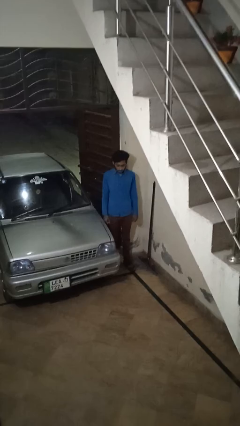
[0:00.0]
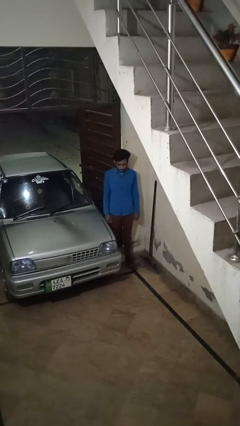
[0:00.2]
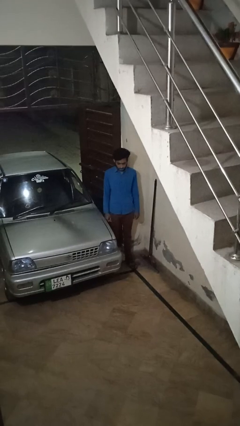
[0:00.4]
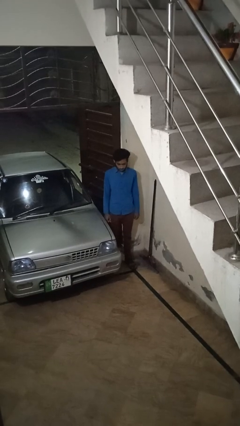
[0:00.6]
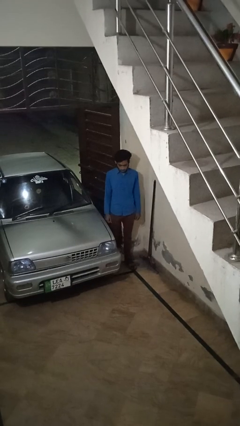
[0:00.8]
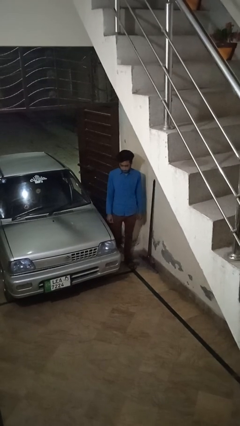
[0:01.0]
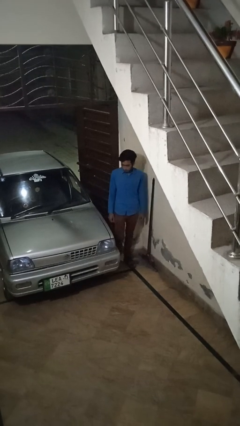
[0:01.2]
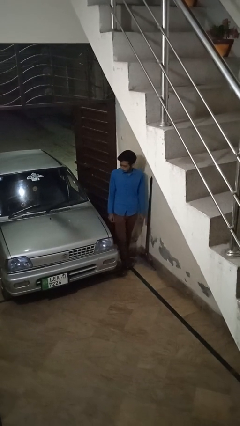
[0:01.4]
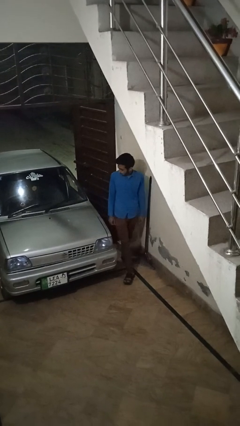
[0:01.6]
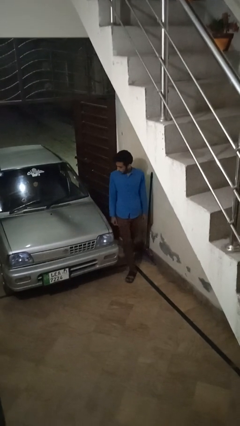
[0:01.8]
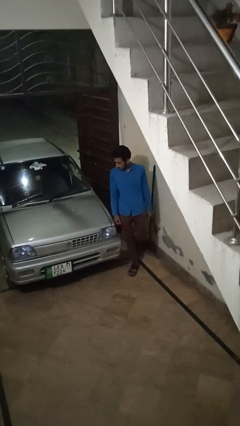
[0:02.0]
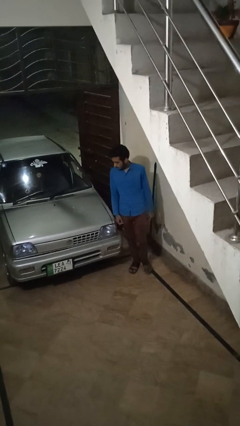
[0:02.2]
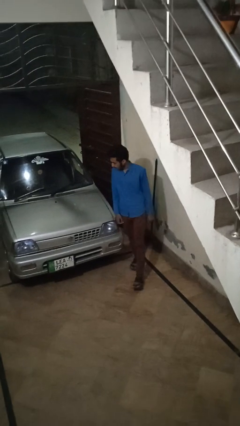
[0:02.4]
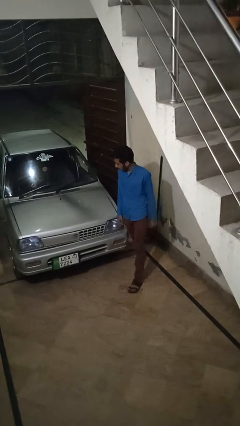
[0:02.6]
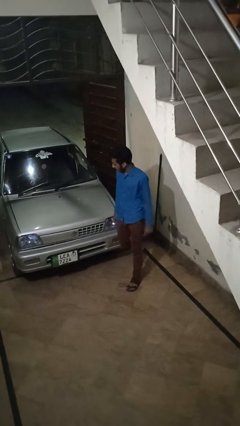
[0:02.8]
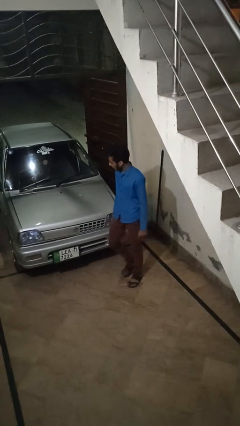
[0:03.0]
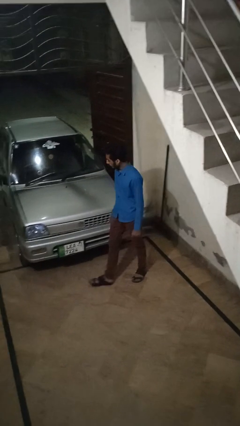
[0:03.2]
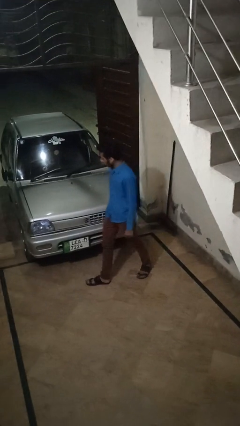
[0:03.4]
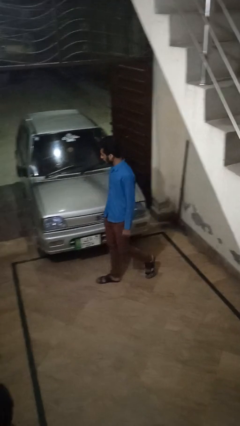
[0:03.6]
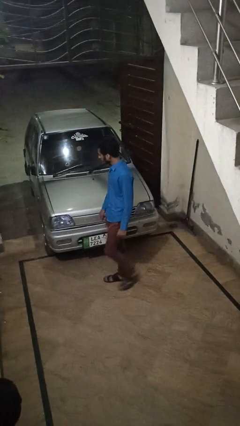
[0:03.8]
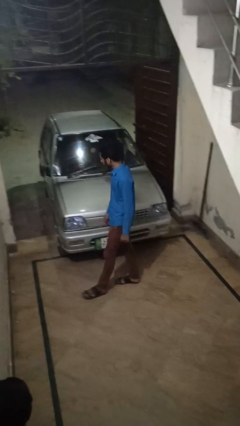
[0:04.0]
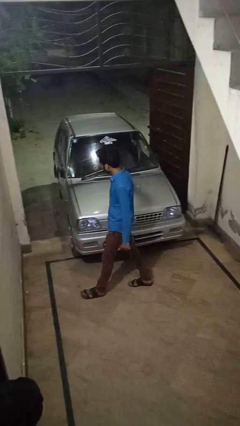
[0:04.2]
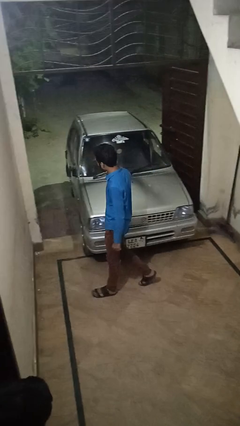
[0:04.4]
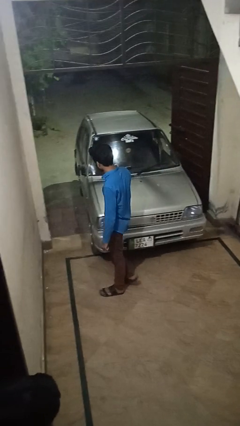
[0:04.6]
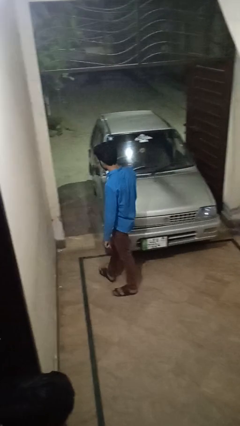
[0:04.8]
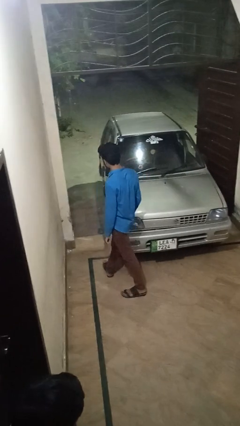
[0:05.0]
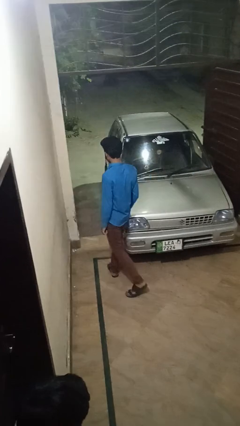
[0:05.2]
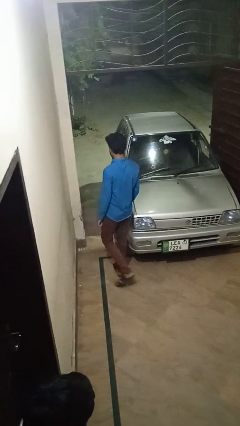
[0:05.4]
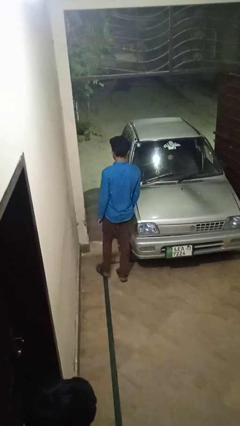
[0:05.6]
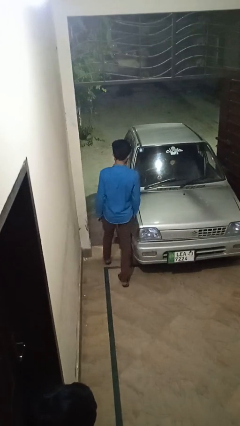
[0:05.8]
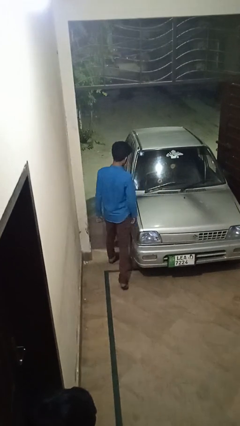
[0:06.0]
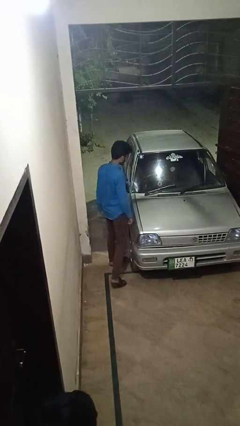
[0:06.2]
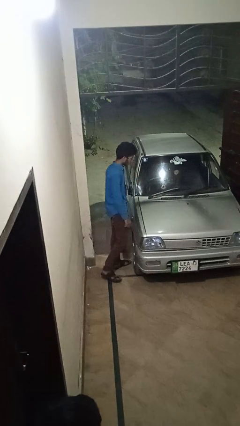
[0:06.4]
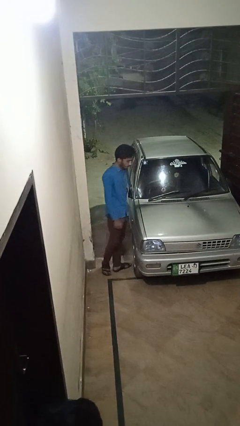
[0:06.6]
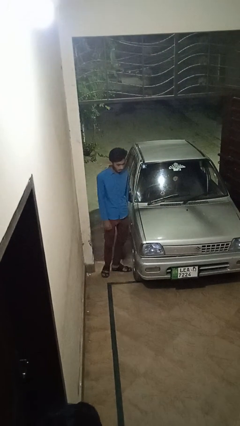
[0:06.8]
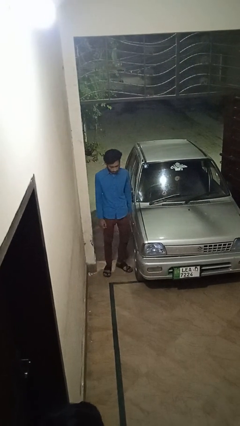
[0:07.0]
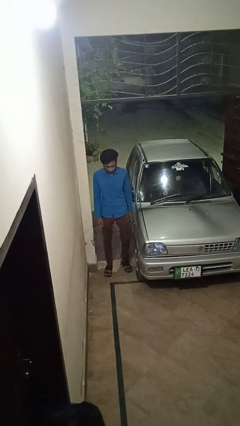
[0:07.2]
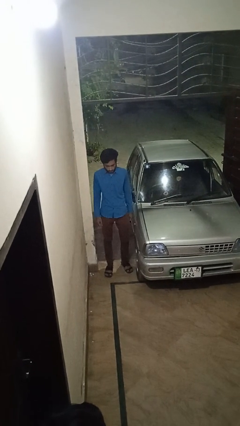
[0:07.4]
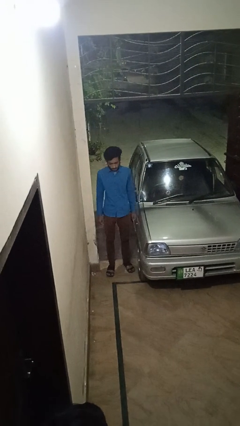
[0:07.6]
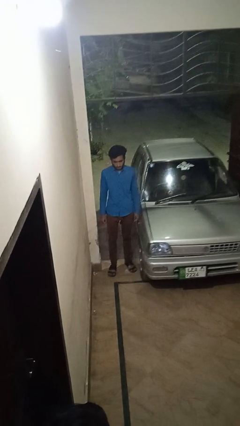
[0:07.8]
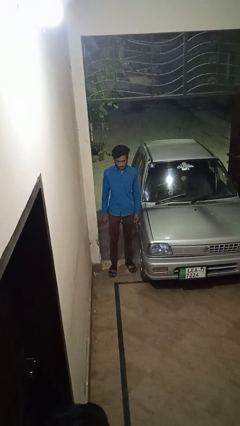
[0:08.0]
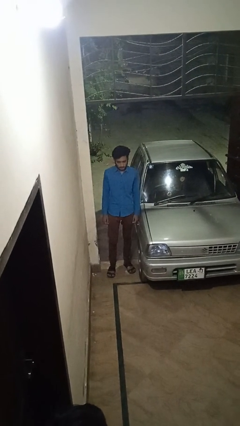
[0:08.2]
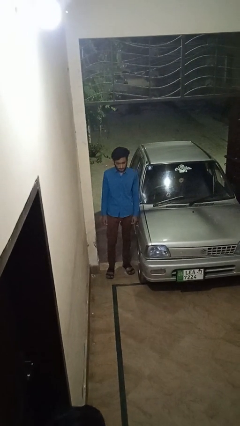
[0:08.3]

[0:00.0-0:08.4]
person walks around car

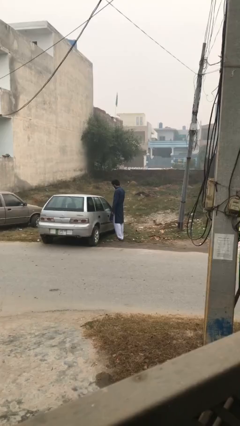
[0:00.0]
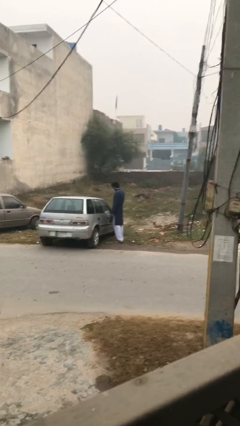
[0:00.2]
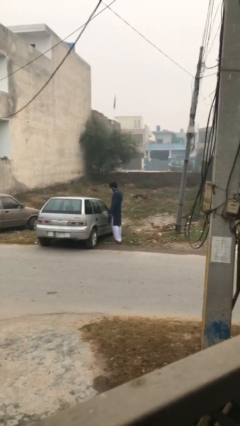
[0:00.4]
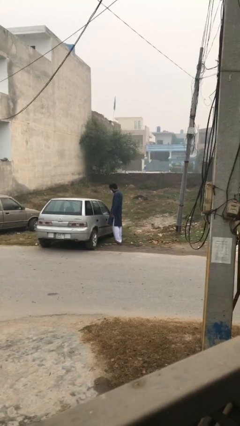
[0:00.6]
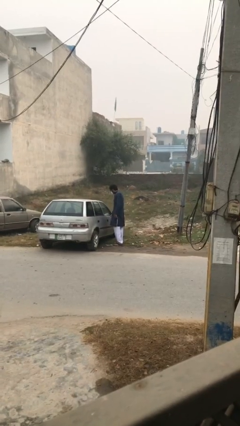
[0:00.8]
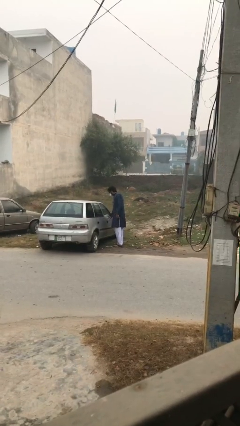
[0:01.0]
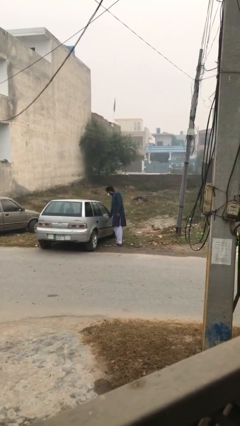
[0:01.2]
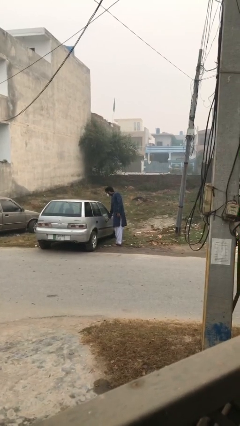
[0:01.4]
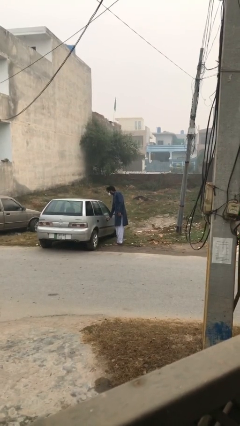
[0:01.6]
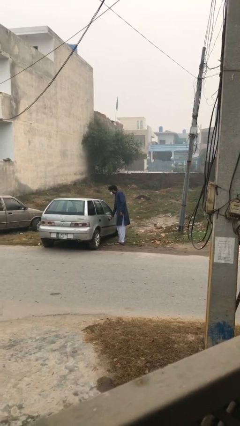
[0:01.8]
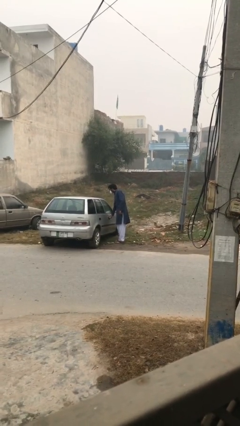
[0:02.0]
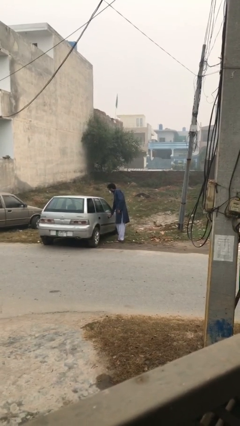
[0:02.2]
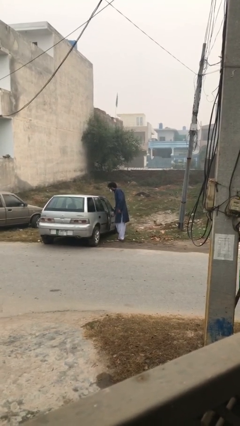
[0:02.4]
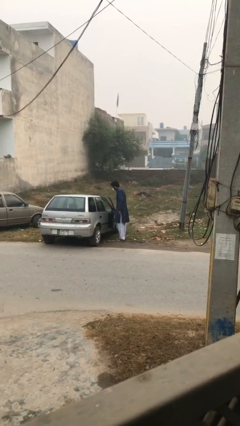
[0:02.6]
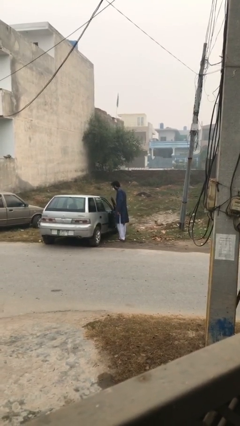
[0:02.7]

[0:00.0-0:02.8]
person opens car door

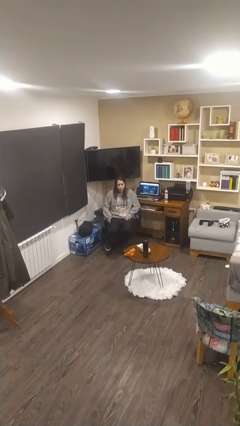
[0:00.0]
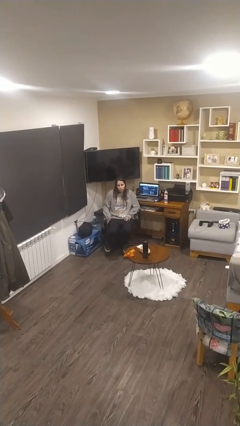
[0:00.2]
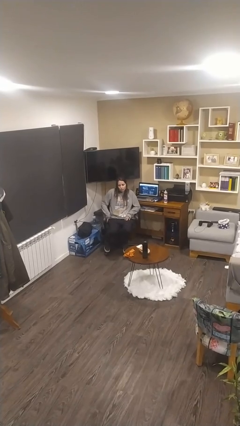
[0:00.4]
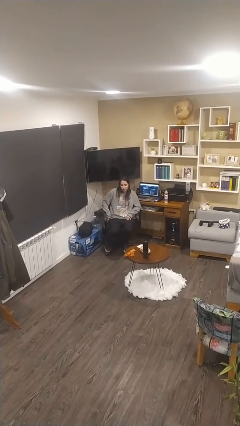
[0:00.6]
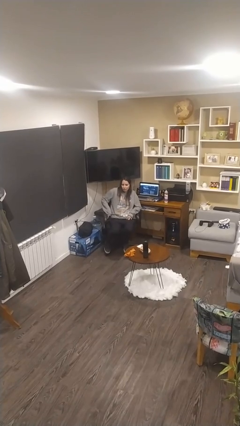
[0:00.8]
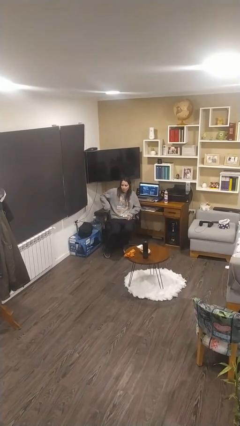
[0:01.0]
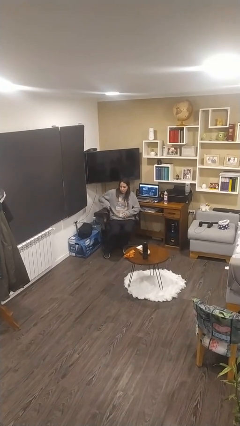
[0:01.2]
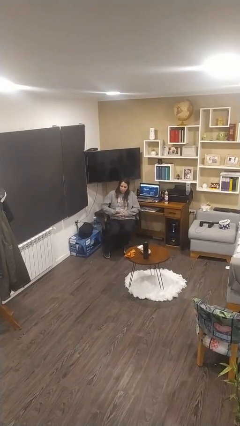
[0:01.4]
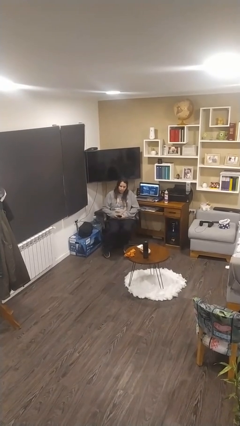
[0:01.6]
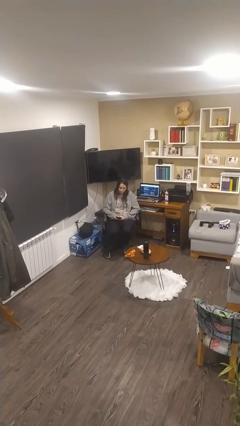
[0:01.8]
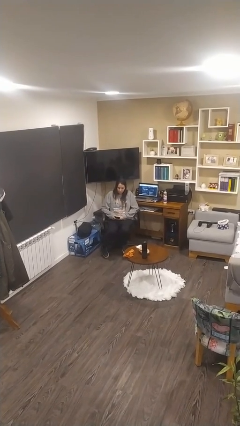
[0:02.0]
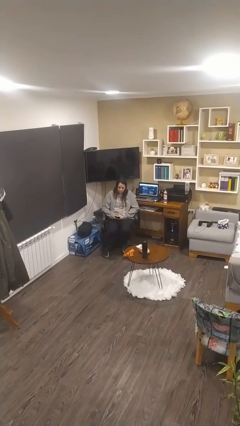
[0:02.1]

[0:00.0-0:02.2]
person takes phone from pocket

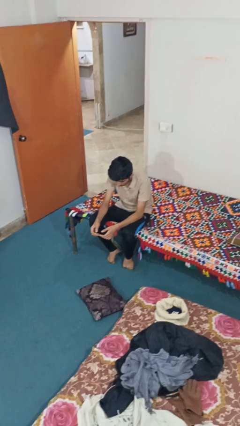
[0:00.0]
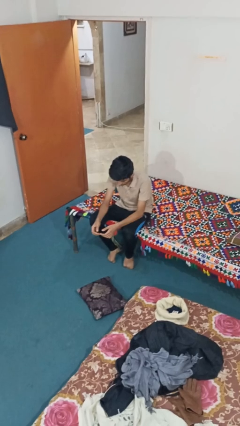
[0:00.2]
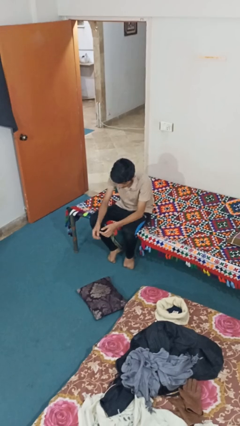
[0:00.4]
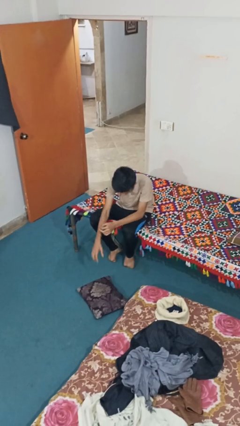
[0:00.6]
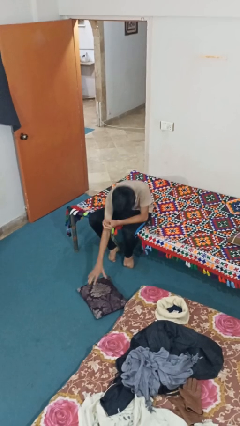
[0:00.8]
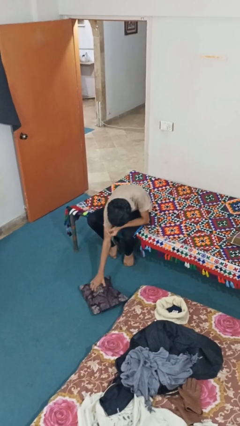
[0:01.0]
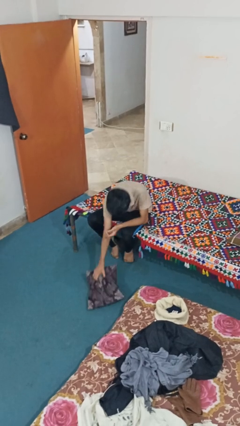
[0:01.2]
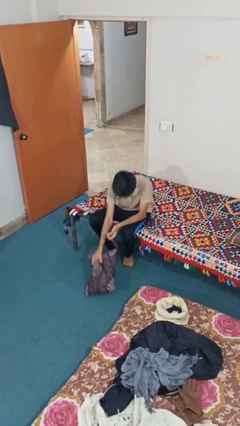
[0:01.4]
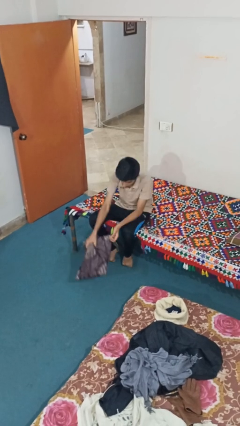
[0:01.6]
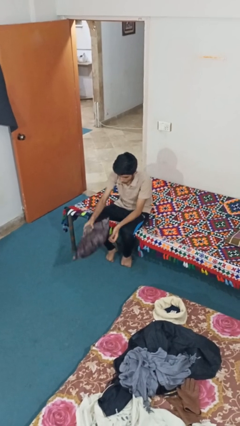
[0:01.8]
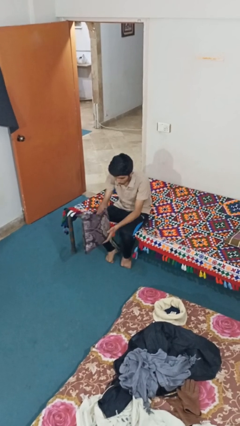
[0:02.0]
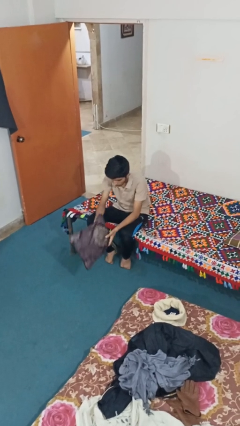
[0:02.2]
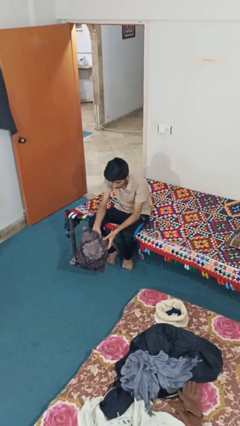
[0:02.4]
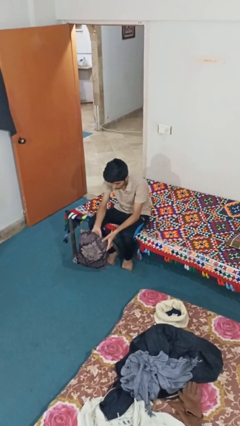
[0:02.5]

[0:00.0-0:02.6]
person picks up object from floor

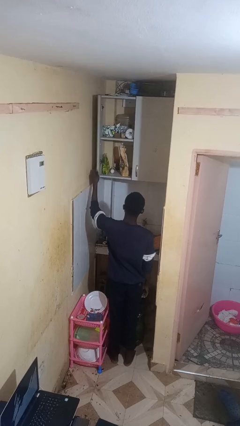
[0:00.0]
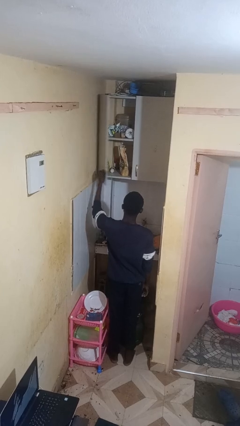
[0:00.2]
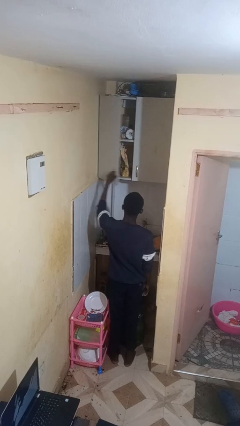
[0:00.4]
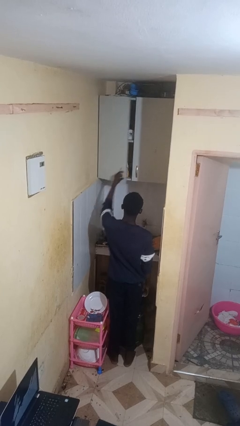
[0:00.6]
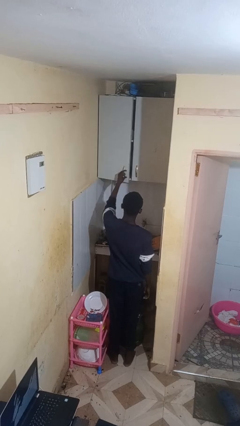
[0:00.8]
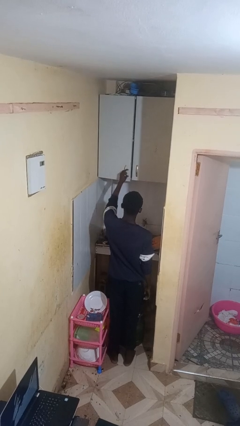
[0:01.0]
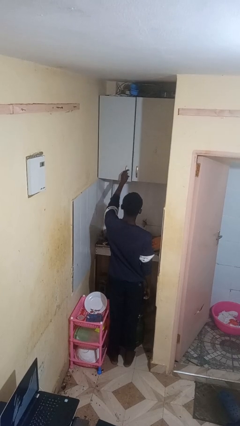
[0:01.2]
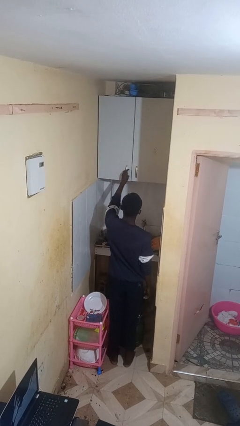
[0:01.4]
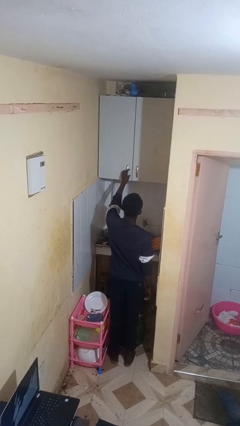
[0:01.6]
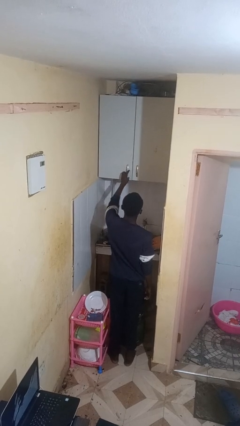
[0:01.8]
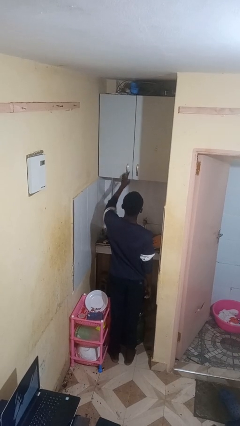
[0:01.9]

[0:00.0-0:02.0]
person closes cabinet

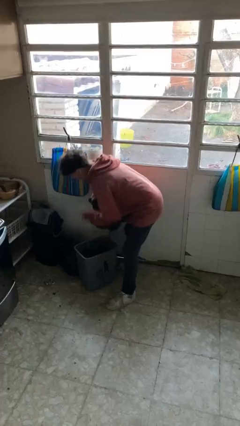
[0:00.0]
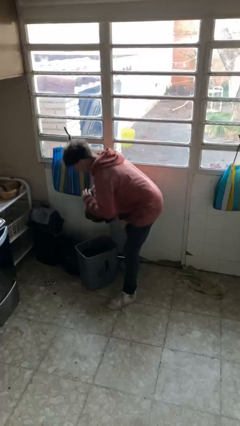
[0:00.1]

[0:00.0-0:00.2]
person inserts trashbag into trashcan
